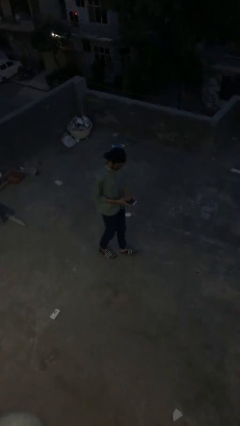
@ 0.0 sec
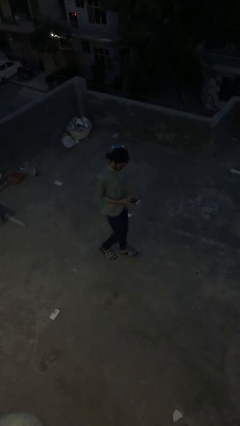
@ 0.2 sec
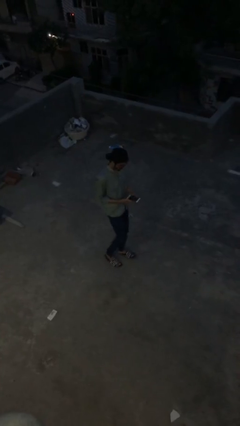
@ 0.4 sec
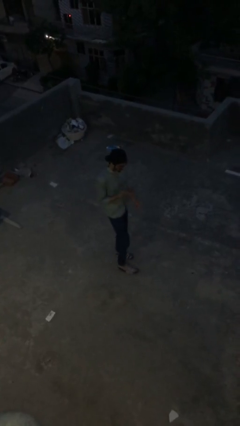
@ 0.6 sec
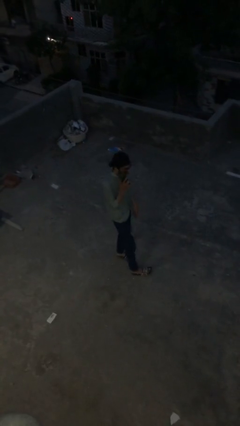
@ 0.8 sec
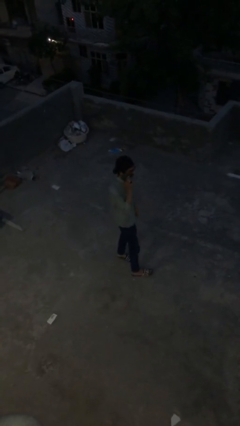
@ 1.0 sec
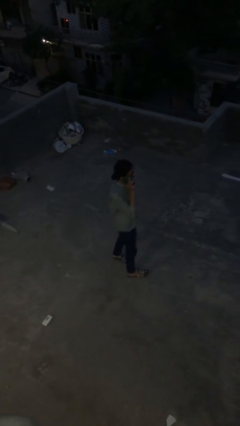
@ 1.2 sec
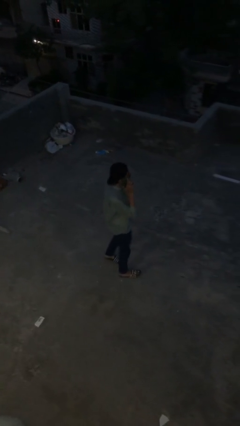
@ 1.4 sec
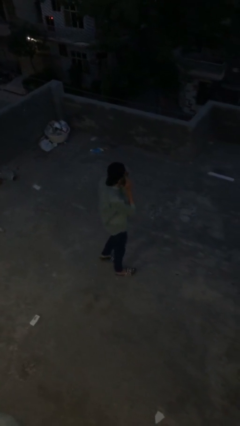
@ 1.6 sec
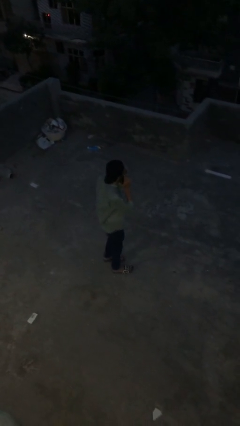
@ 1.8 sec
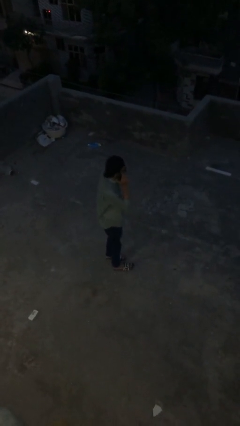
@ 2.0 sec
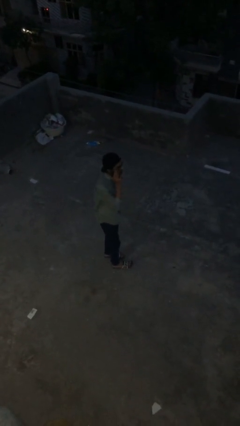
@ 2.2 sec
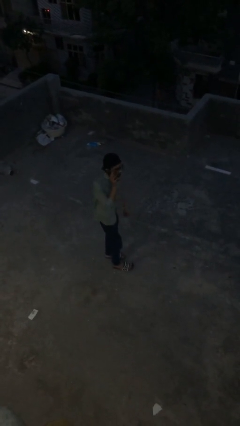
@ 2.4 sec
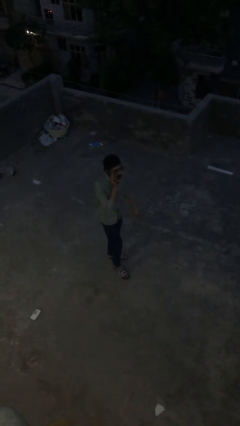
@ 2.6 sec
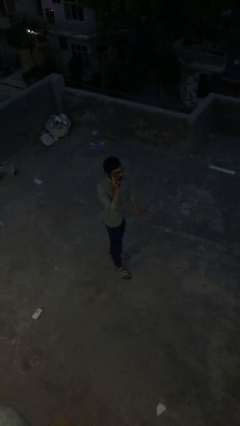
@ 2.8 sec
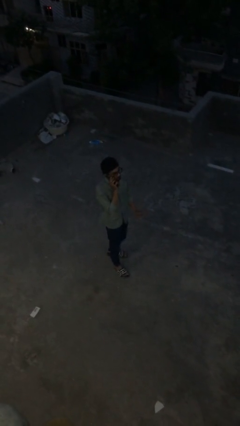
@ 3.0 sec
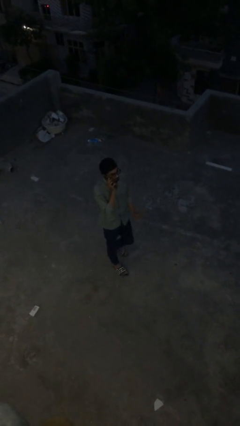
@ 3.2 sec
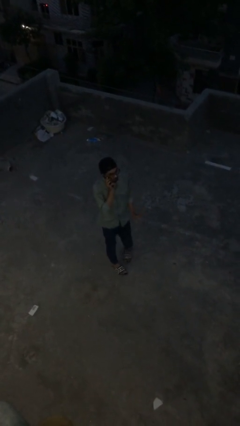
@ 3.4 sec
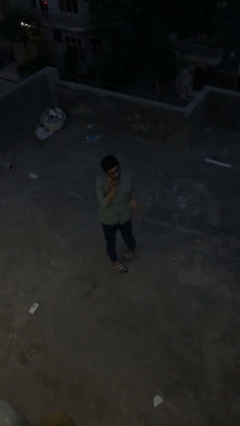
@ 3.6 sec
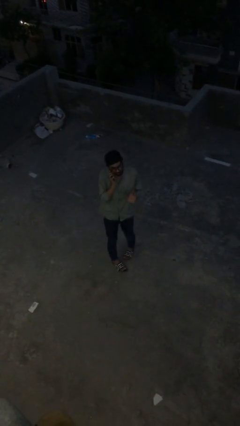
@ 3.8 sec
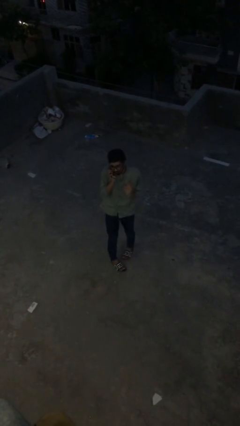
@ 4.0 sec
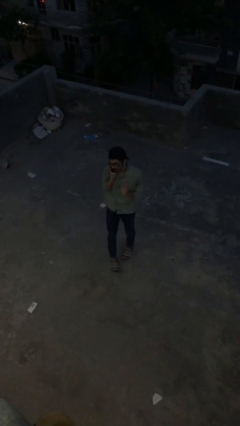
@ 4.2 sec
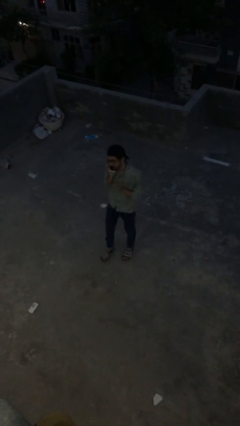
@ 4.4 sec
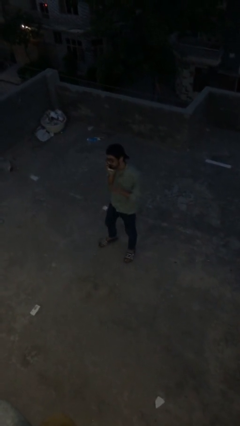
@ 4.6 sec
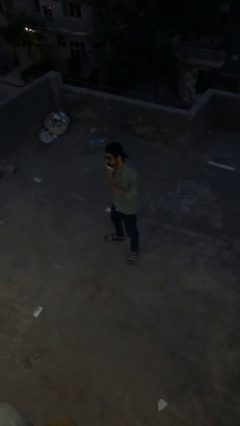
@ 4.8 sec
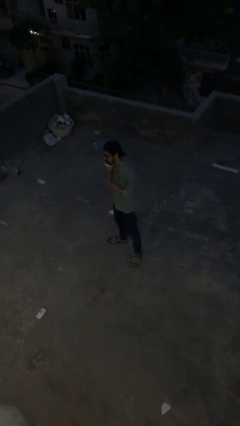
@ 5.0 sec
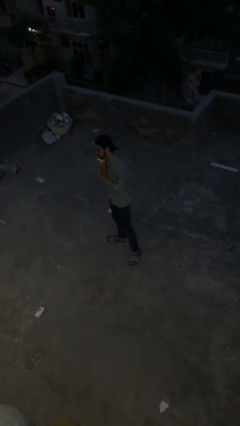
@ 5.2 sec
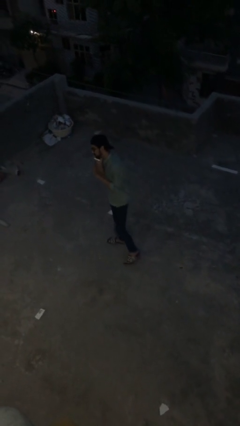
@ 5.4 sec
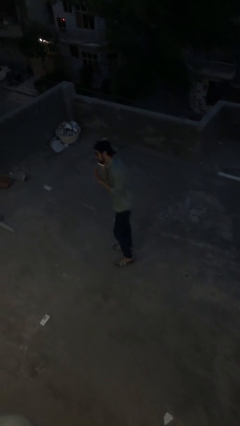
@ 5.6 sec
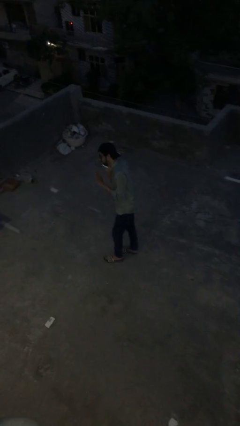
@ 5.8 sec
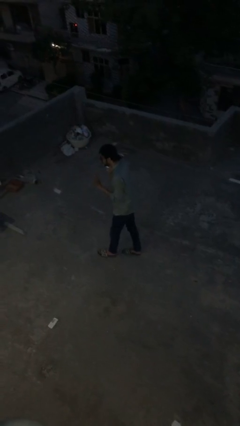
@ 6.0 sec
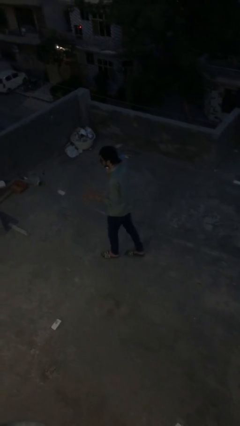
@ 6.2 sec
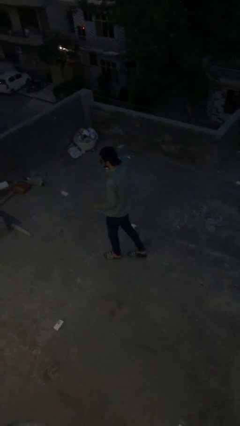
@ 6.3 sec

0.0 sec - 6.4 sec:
person talks on phone

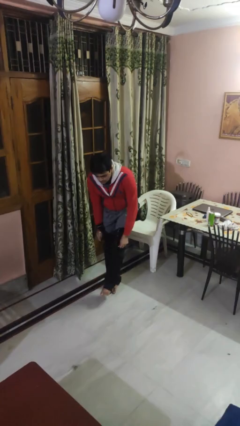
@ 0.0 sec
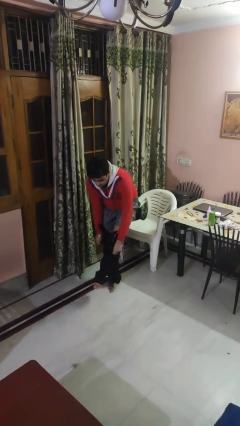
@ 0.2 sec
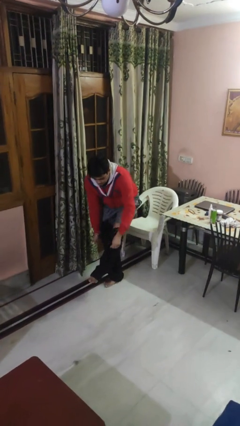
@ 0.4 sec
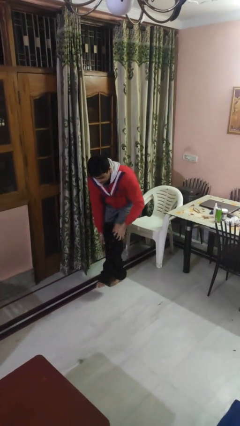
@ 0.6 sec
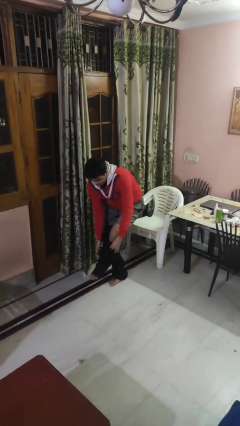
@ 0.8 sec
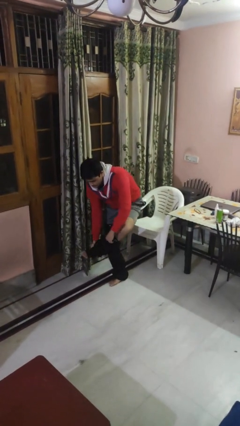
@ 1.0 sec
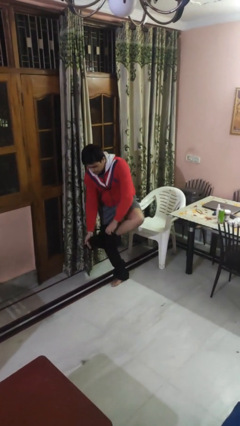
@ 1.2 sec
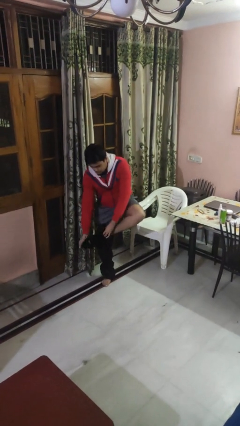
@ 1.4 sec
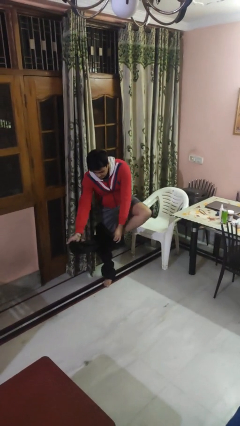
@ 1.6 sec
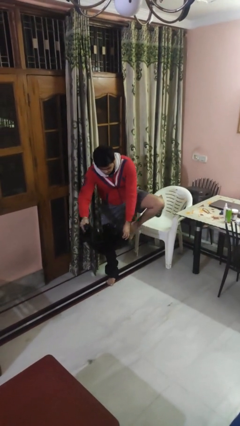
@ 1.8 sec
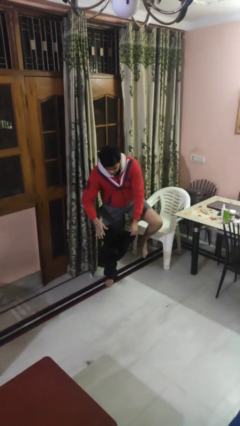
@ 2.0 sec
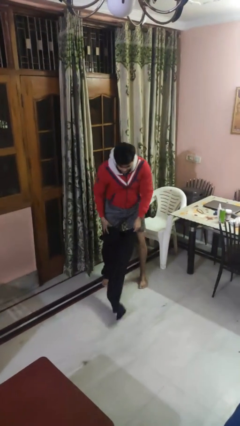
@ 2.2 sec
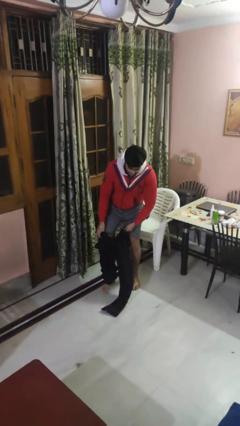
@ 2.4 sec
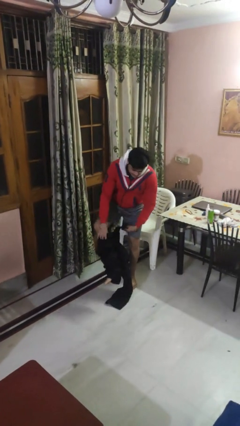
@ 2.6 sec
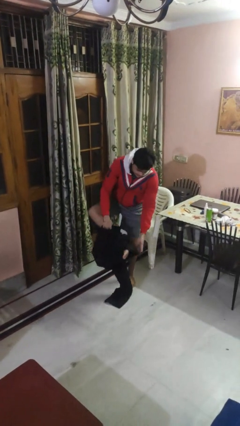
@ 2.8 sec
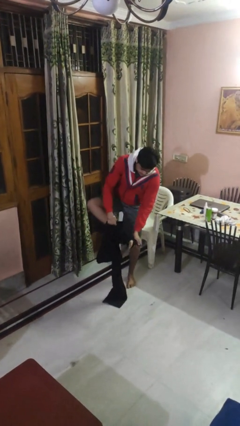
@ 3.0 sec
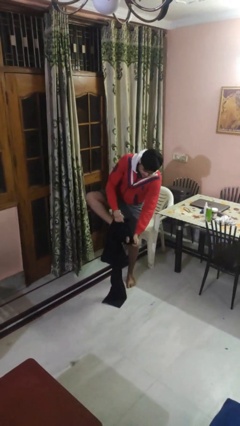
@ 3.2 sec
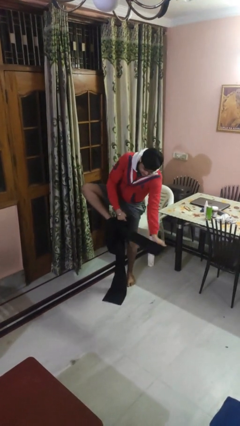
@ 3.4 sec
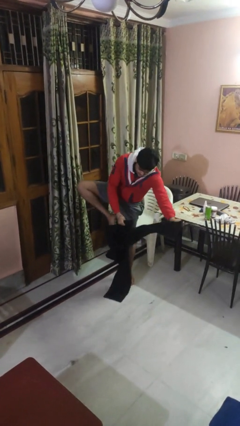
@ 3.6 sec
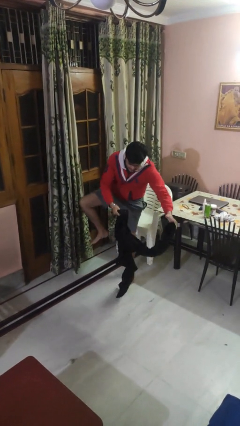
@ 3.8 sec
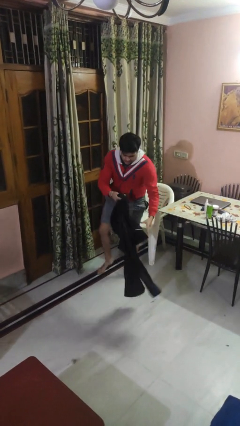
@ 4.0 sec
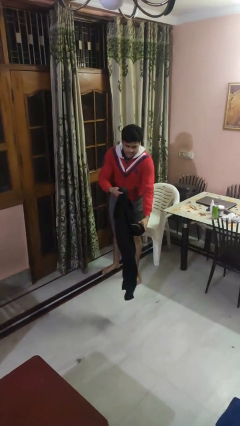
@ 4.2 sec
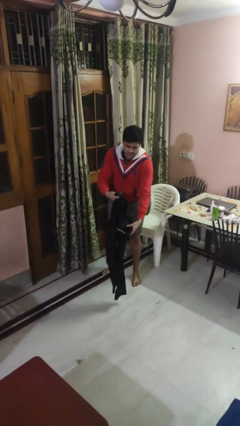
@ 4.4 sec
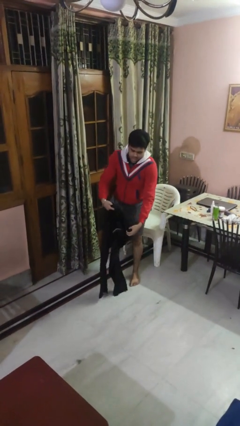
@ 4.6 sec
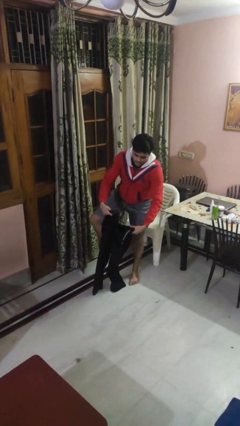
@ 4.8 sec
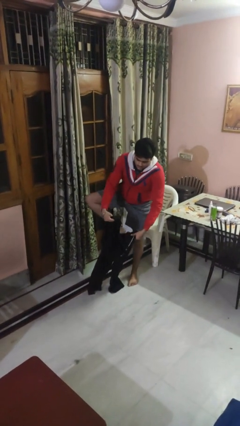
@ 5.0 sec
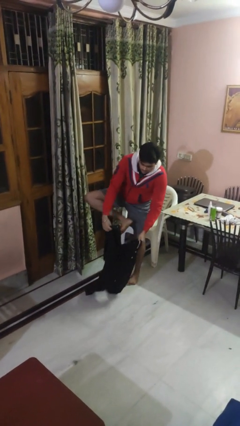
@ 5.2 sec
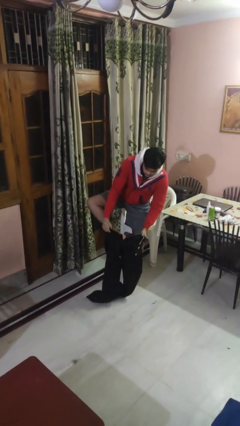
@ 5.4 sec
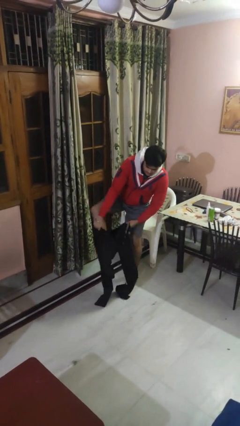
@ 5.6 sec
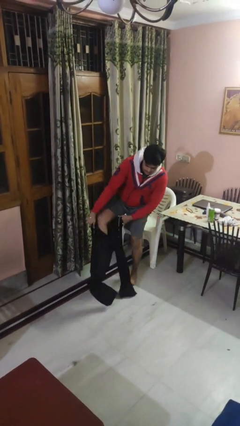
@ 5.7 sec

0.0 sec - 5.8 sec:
person takes off pants

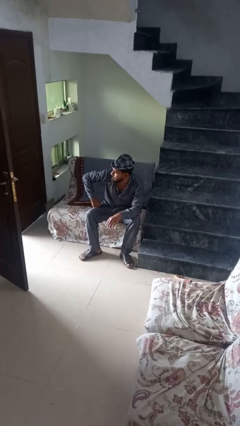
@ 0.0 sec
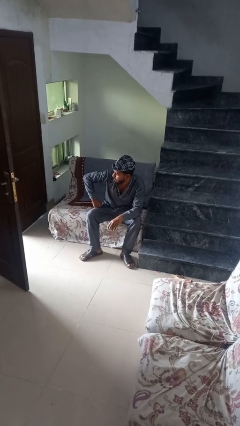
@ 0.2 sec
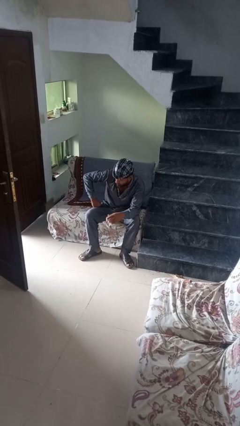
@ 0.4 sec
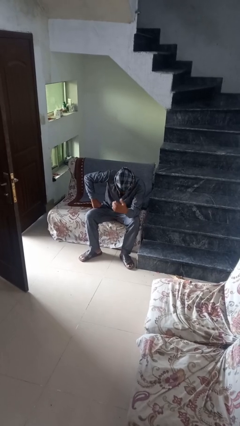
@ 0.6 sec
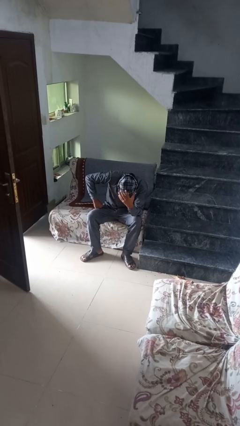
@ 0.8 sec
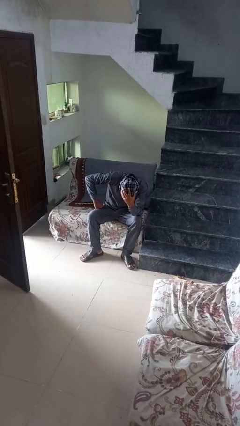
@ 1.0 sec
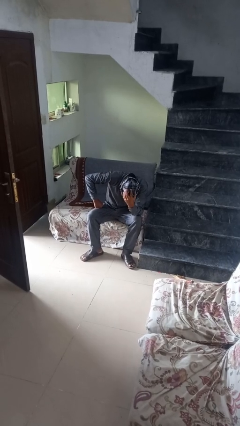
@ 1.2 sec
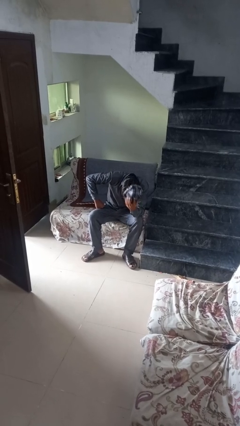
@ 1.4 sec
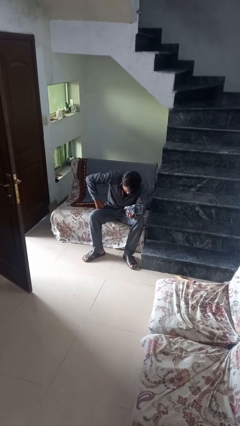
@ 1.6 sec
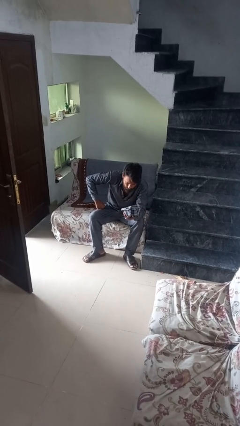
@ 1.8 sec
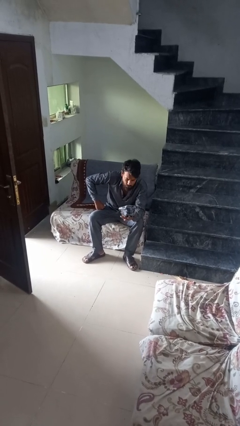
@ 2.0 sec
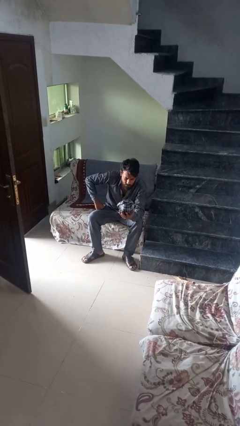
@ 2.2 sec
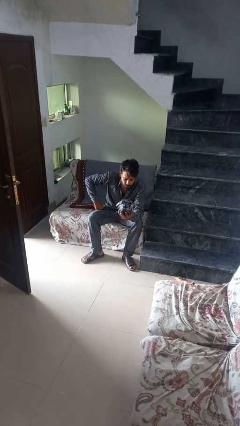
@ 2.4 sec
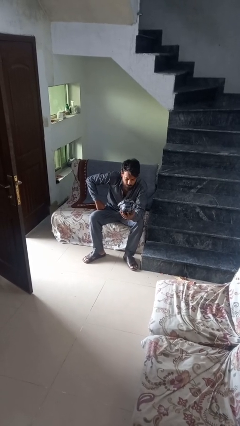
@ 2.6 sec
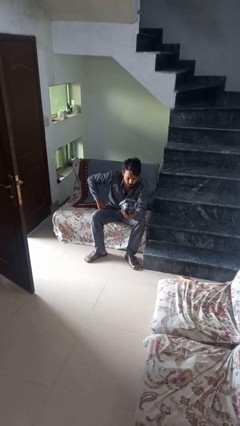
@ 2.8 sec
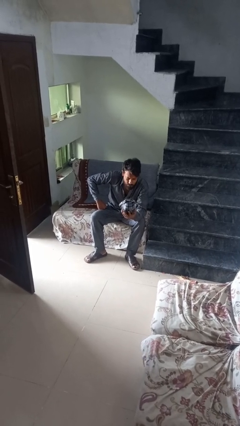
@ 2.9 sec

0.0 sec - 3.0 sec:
person takes off hat

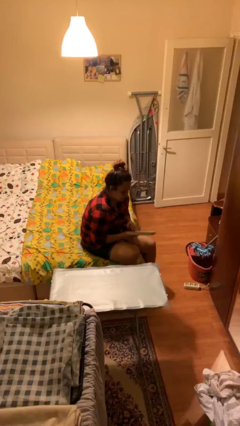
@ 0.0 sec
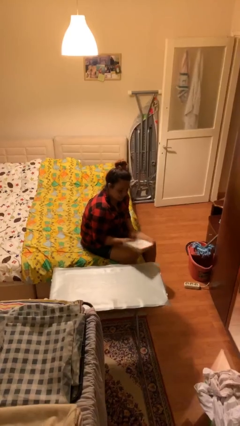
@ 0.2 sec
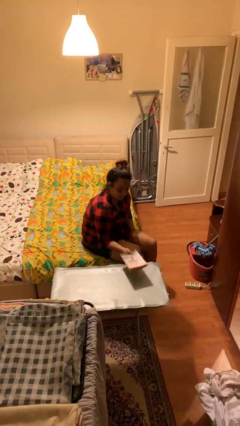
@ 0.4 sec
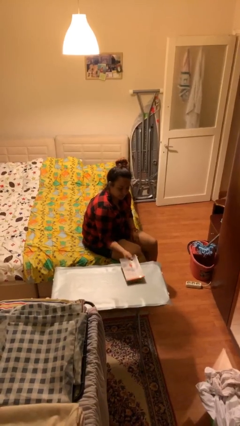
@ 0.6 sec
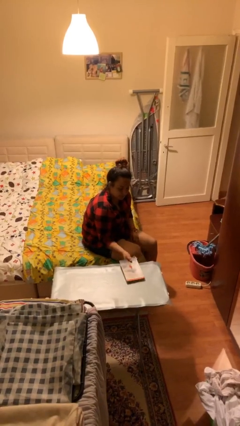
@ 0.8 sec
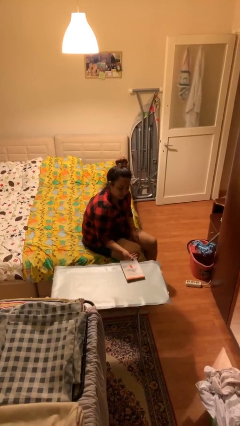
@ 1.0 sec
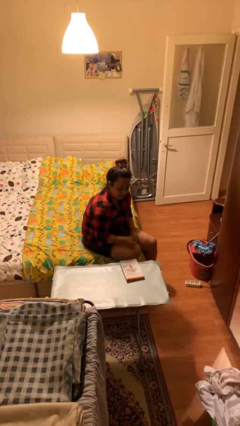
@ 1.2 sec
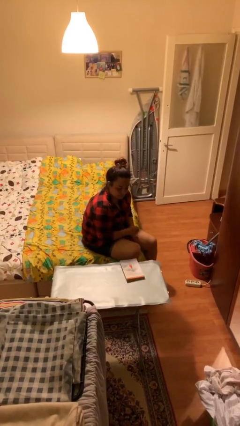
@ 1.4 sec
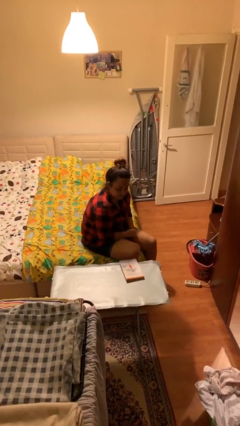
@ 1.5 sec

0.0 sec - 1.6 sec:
person puts down object on table

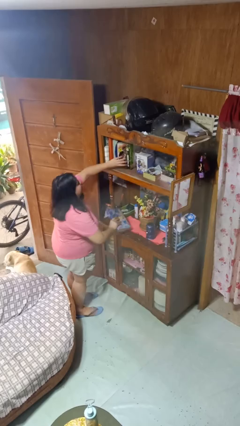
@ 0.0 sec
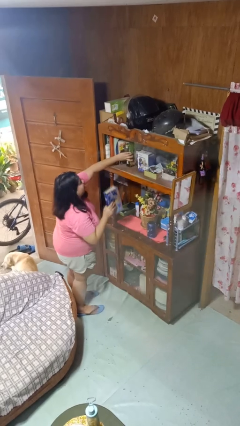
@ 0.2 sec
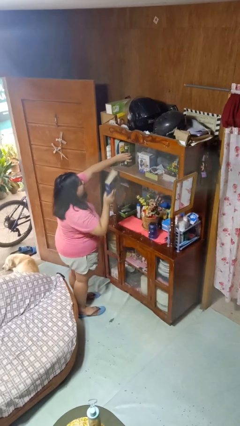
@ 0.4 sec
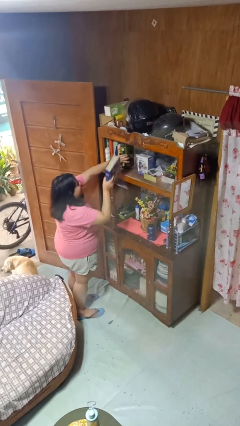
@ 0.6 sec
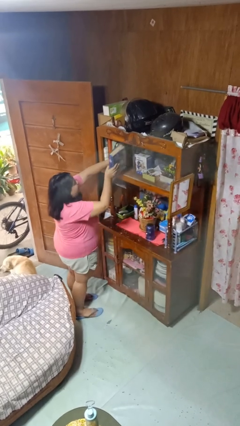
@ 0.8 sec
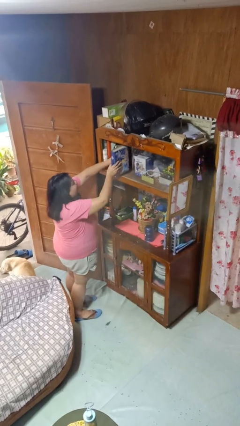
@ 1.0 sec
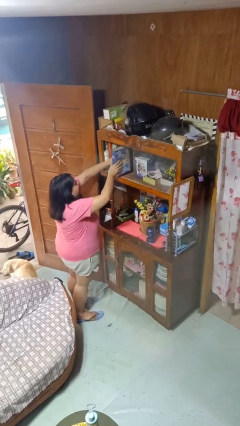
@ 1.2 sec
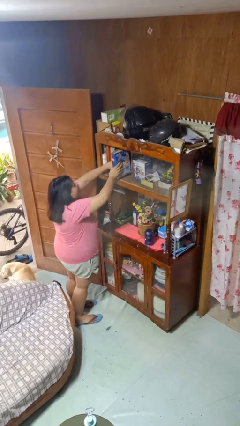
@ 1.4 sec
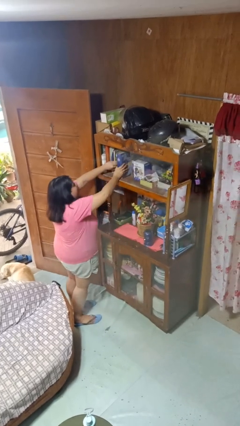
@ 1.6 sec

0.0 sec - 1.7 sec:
person puts down object on shelf
